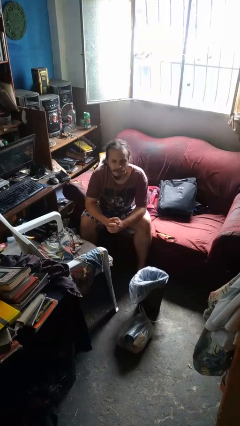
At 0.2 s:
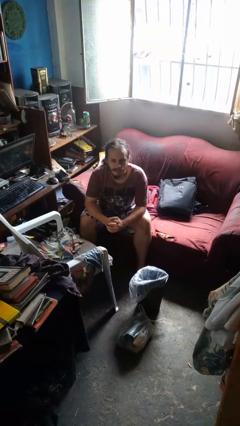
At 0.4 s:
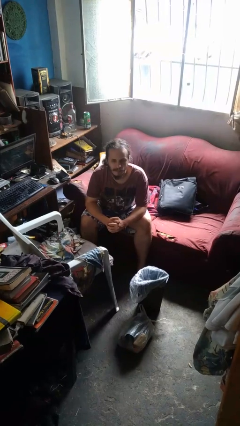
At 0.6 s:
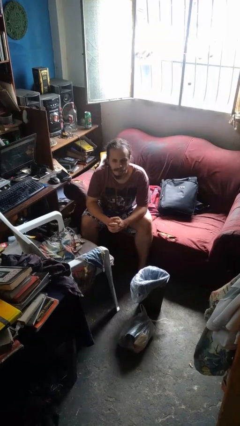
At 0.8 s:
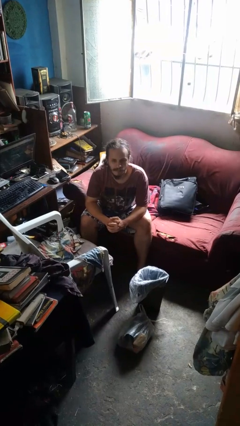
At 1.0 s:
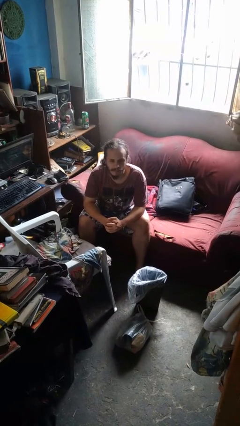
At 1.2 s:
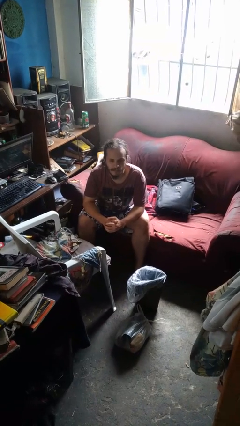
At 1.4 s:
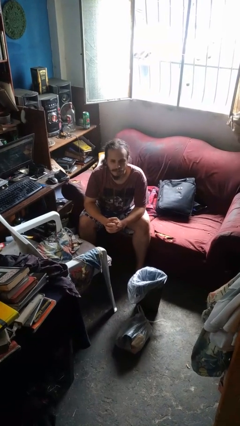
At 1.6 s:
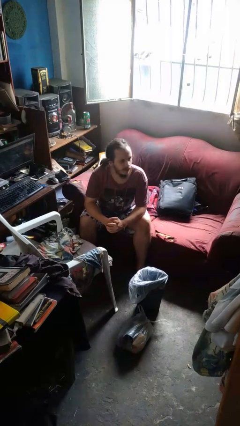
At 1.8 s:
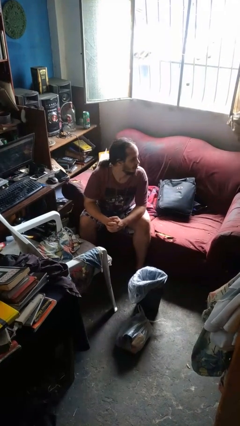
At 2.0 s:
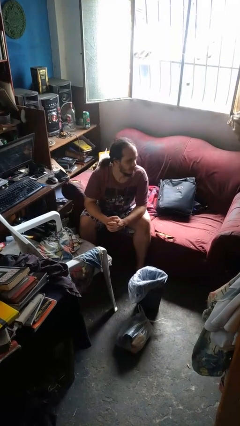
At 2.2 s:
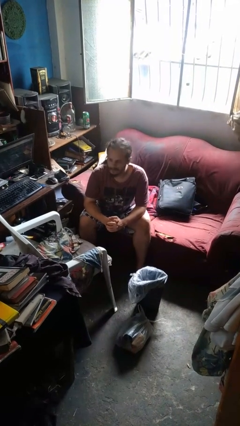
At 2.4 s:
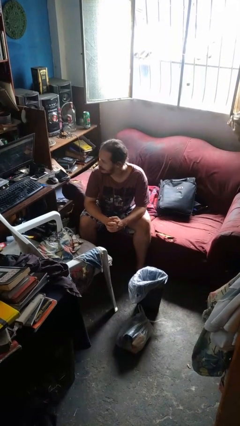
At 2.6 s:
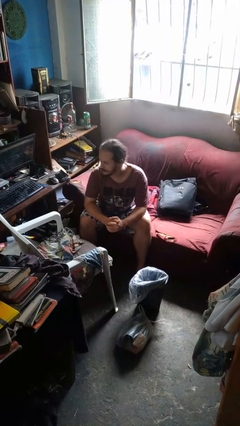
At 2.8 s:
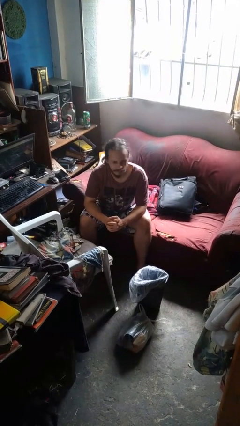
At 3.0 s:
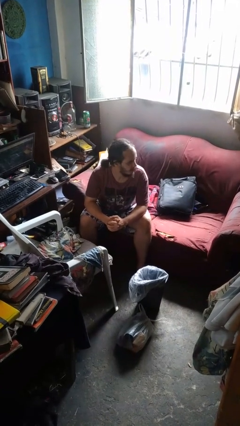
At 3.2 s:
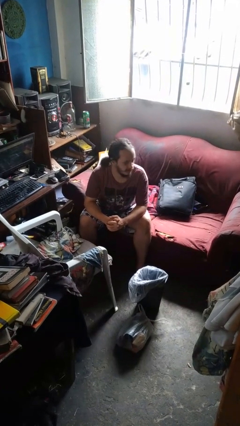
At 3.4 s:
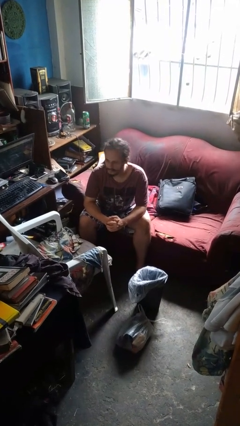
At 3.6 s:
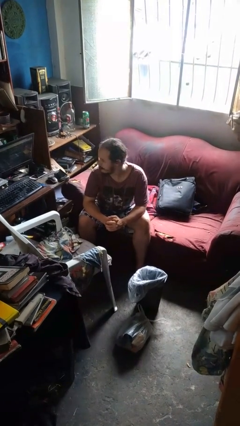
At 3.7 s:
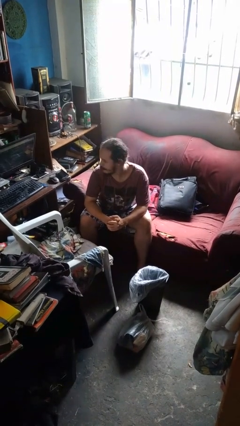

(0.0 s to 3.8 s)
person shakes head

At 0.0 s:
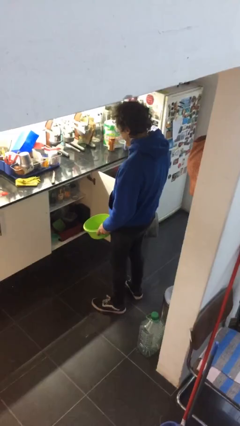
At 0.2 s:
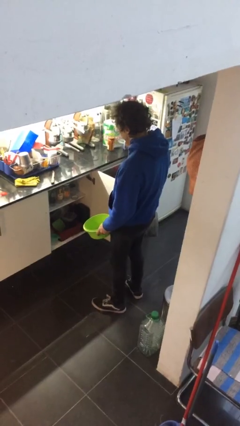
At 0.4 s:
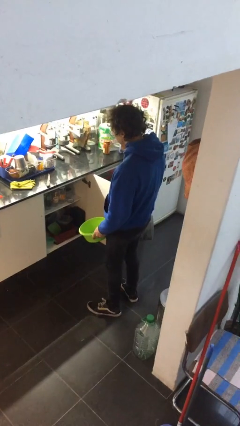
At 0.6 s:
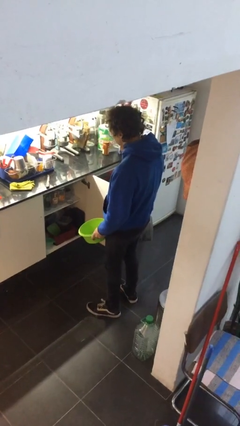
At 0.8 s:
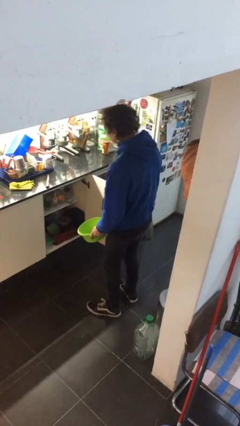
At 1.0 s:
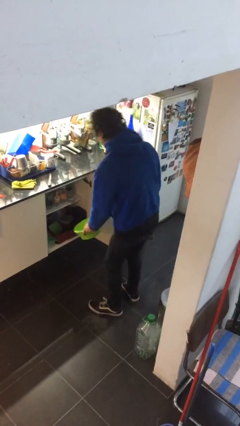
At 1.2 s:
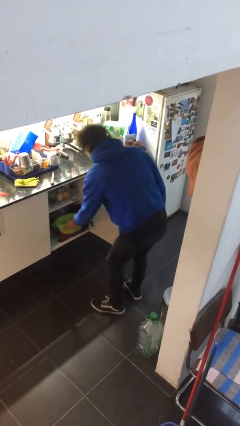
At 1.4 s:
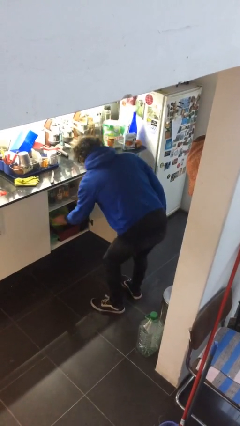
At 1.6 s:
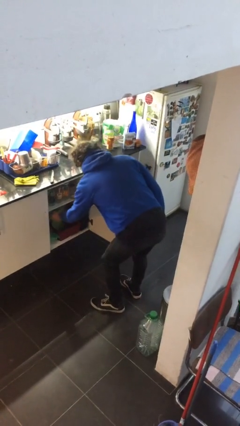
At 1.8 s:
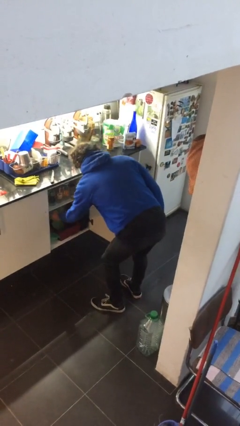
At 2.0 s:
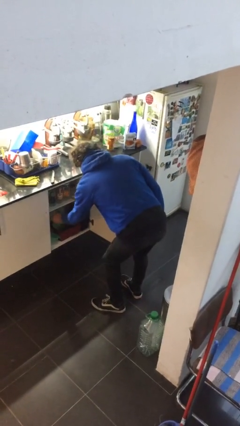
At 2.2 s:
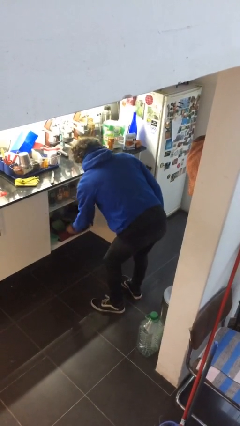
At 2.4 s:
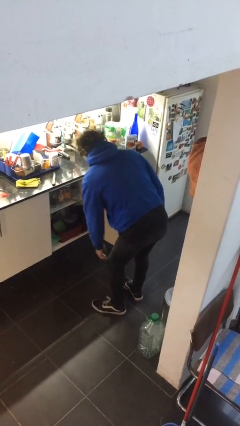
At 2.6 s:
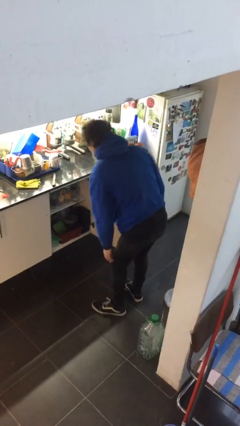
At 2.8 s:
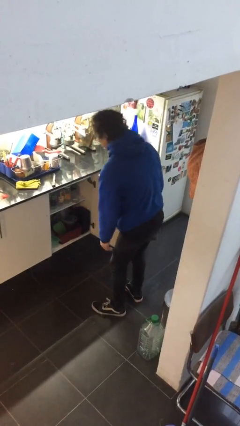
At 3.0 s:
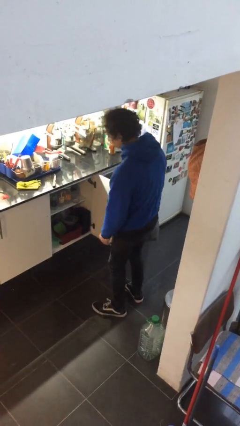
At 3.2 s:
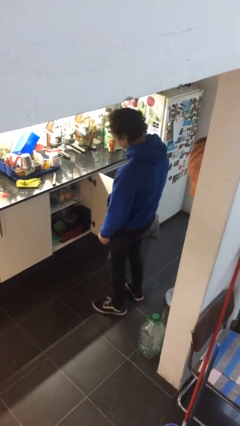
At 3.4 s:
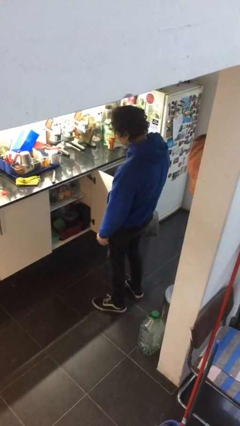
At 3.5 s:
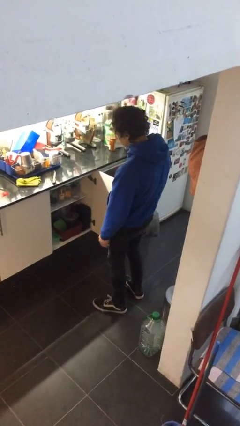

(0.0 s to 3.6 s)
person puts down object into cabinet

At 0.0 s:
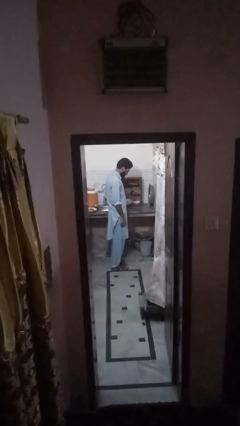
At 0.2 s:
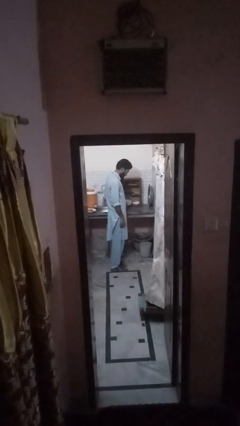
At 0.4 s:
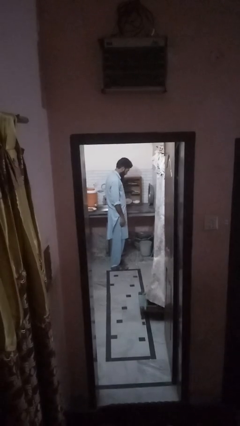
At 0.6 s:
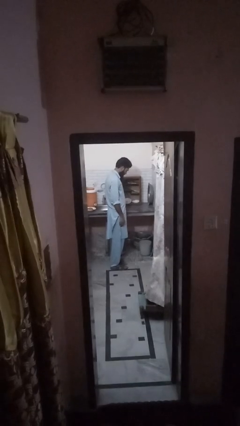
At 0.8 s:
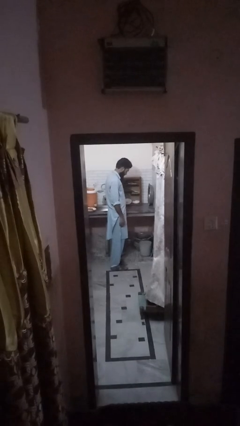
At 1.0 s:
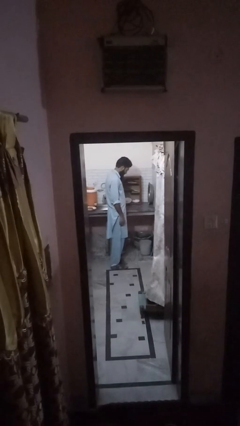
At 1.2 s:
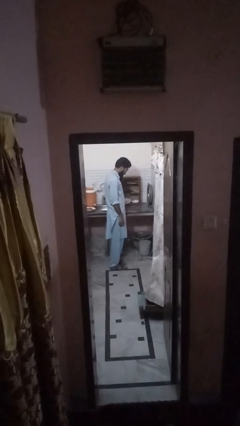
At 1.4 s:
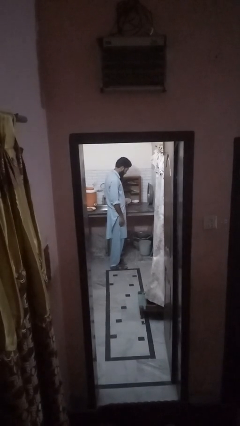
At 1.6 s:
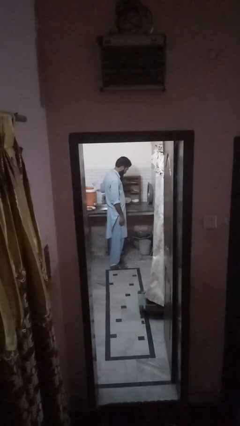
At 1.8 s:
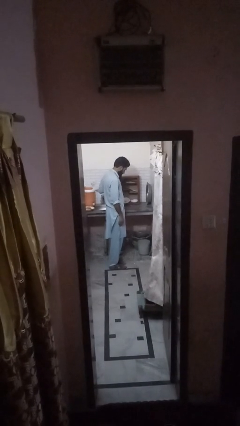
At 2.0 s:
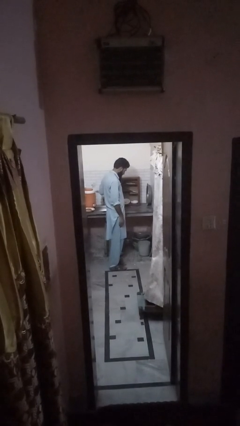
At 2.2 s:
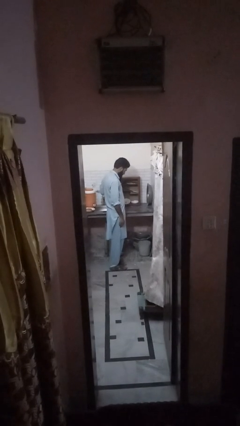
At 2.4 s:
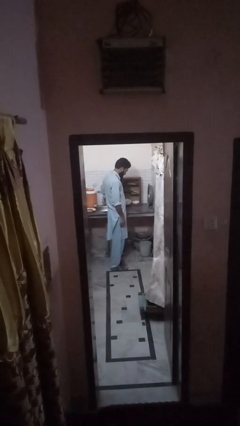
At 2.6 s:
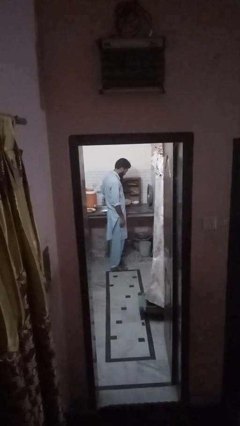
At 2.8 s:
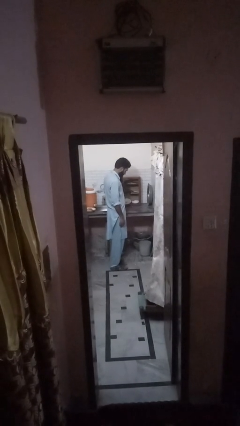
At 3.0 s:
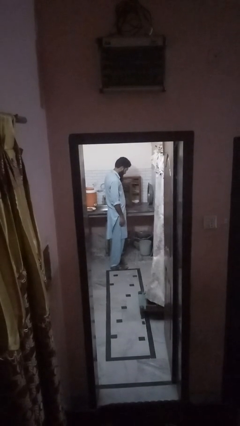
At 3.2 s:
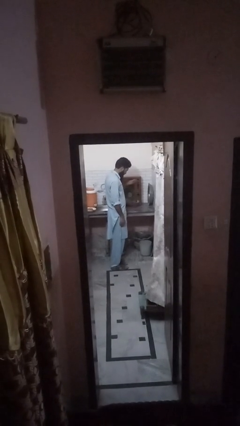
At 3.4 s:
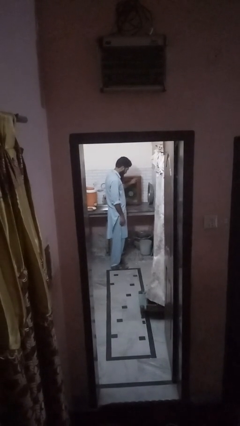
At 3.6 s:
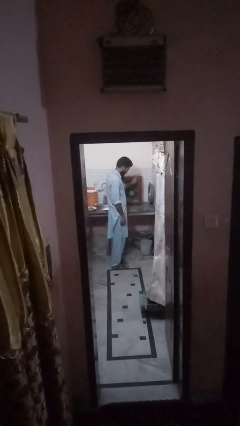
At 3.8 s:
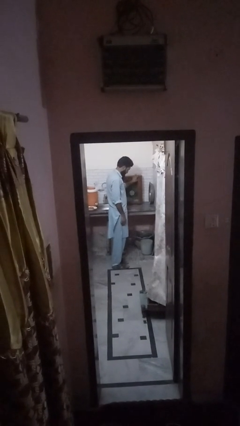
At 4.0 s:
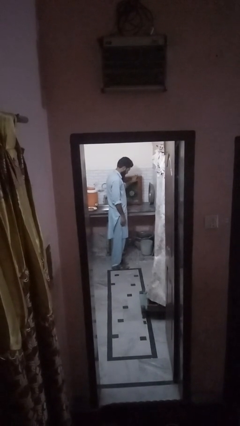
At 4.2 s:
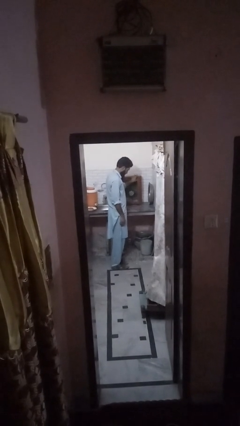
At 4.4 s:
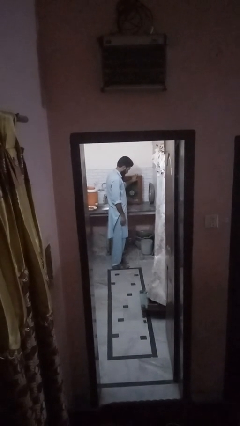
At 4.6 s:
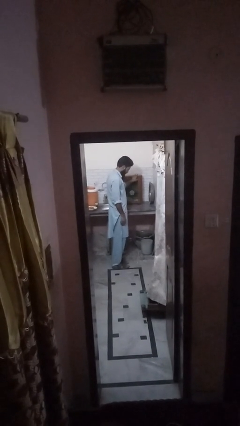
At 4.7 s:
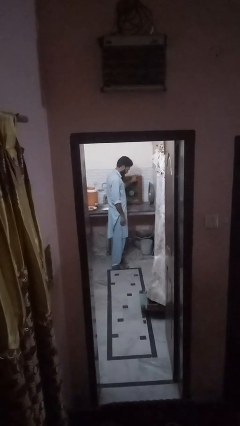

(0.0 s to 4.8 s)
person closes cabinet

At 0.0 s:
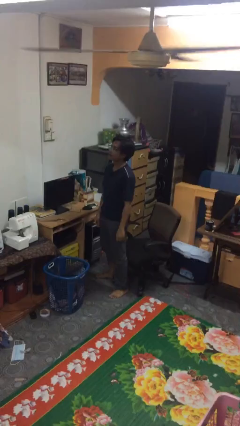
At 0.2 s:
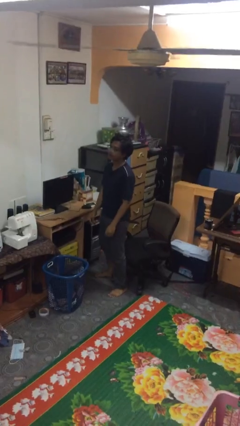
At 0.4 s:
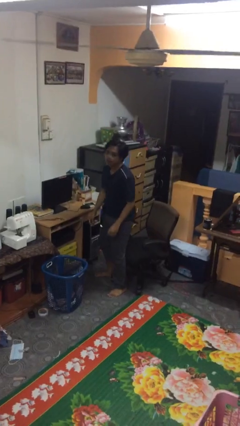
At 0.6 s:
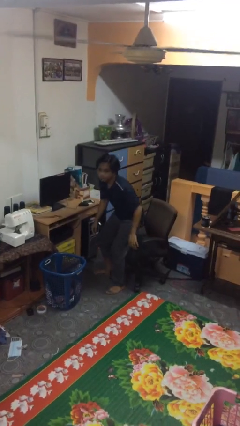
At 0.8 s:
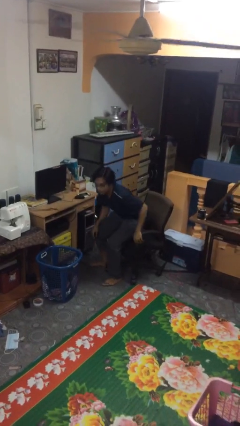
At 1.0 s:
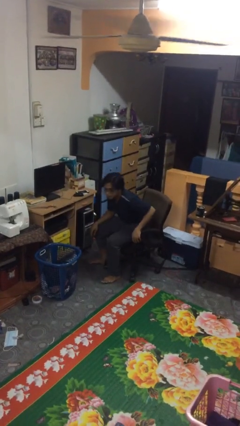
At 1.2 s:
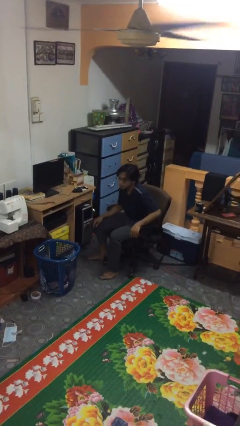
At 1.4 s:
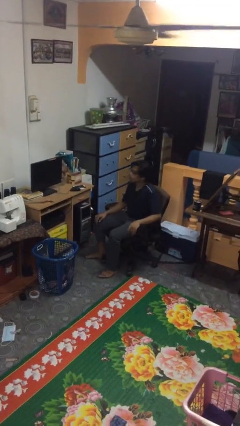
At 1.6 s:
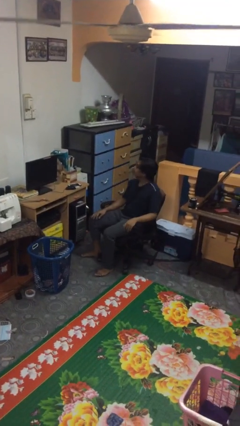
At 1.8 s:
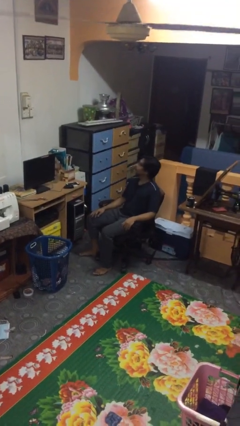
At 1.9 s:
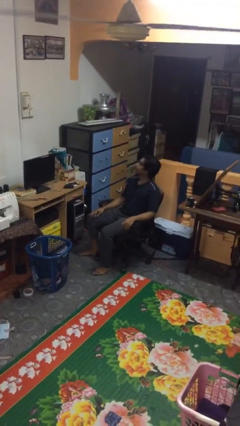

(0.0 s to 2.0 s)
person sits down

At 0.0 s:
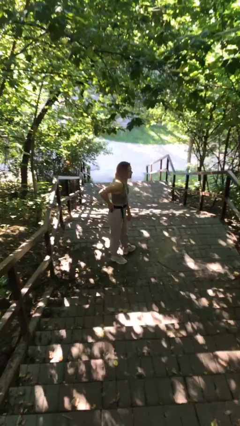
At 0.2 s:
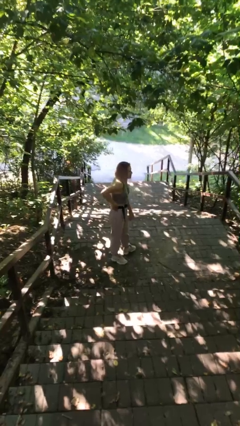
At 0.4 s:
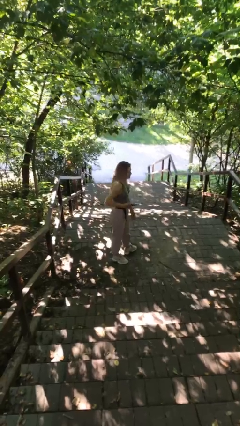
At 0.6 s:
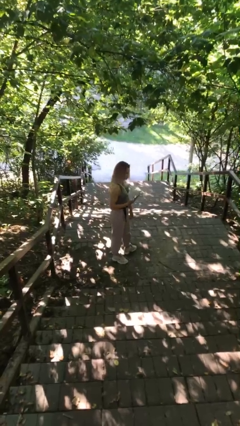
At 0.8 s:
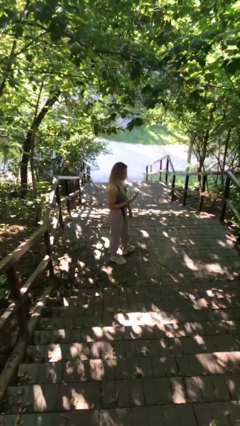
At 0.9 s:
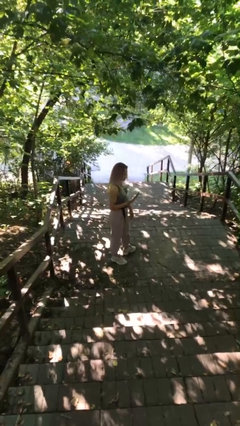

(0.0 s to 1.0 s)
person takes phone from pocket

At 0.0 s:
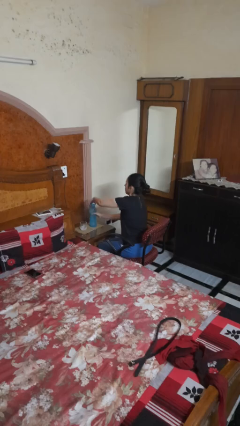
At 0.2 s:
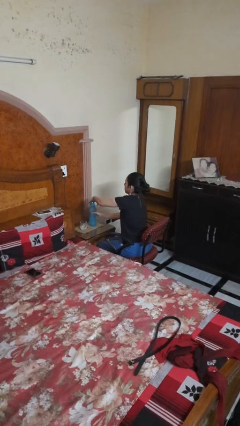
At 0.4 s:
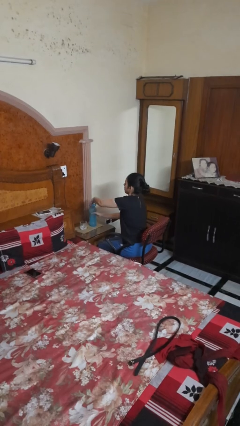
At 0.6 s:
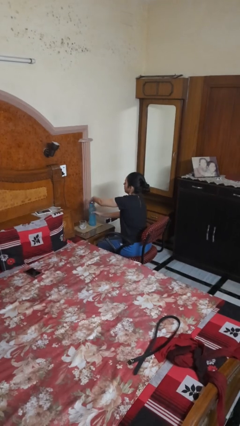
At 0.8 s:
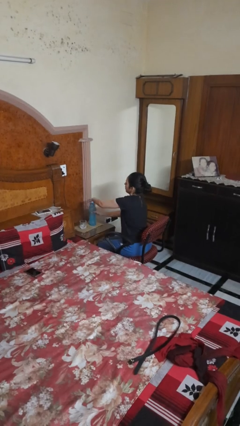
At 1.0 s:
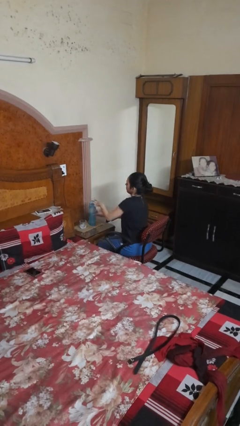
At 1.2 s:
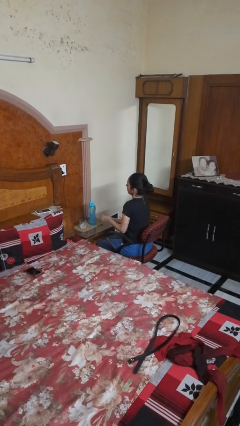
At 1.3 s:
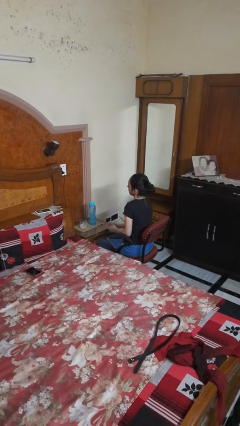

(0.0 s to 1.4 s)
person screws lid to bottle

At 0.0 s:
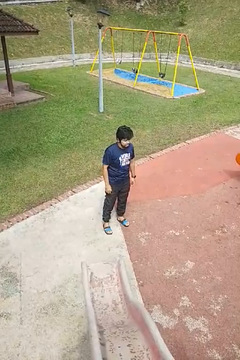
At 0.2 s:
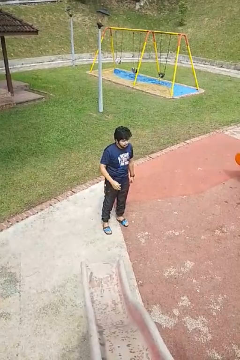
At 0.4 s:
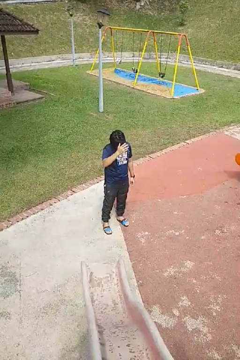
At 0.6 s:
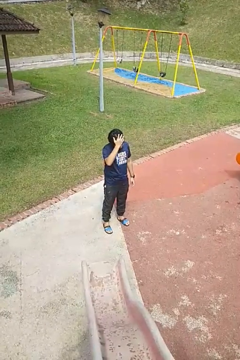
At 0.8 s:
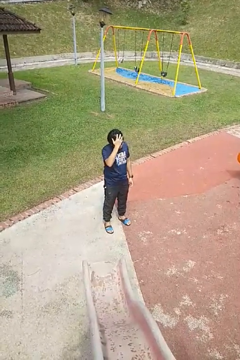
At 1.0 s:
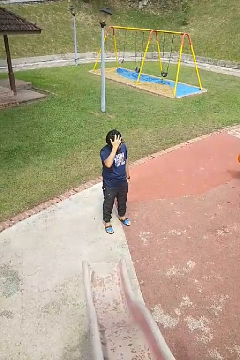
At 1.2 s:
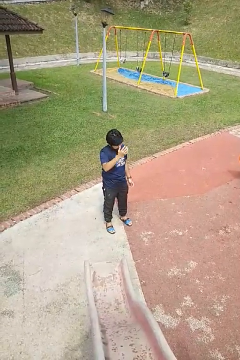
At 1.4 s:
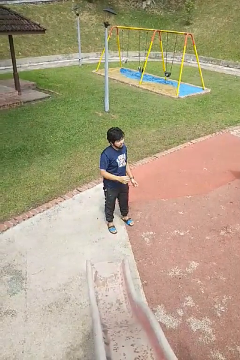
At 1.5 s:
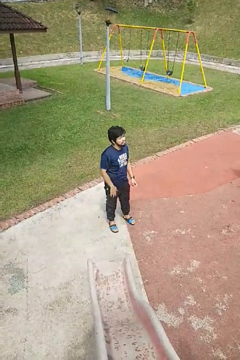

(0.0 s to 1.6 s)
person pats head
